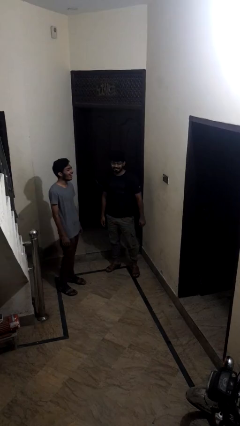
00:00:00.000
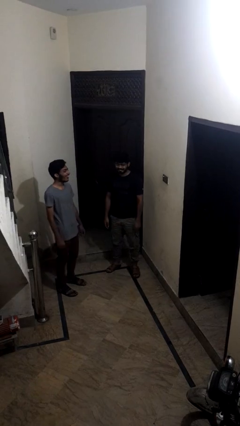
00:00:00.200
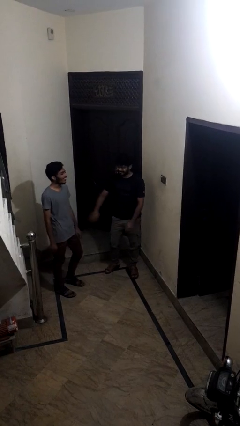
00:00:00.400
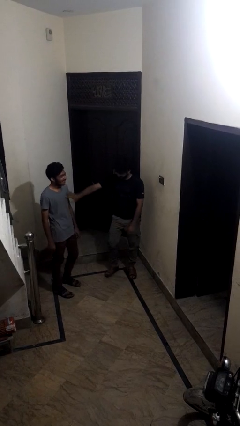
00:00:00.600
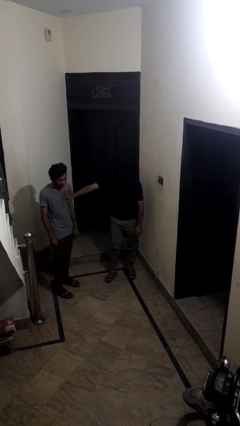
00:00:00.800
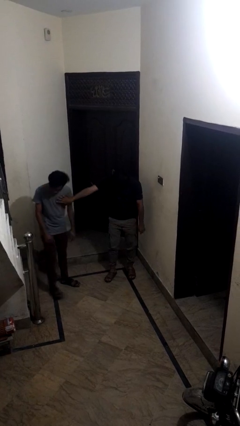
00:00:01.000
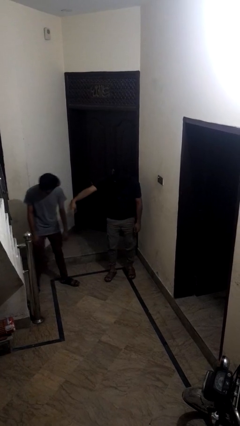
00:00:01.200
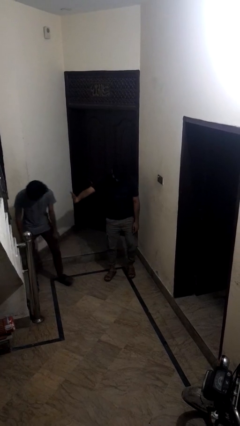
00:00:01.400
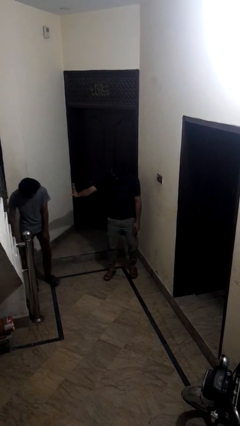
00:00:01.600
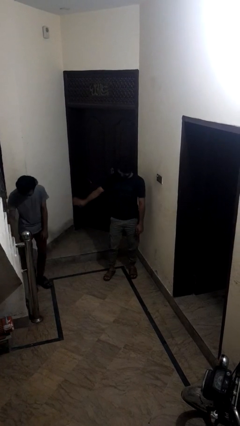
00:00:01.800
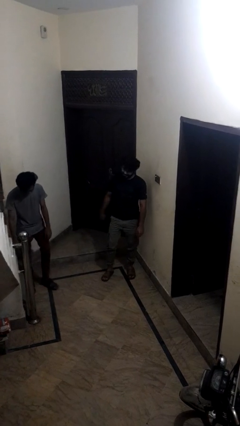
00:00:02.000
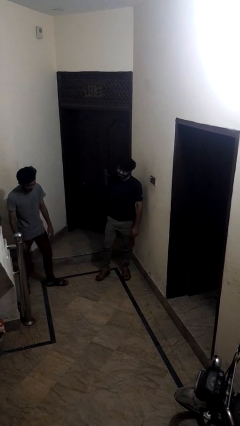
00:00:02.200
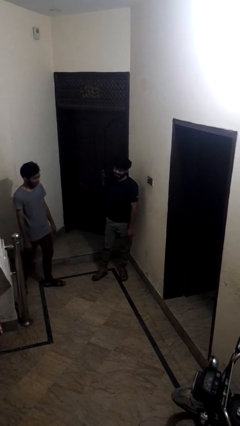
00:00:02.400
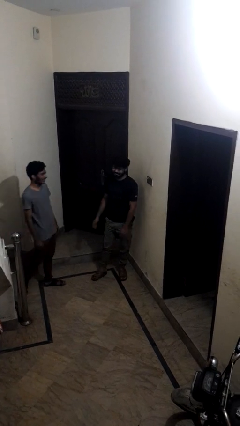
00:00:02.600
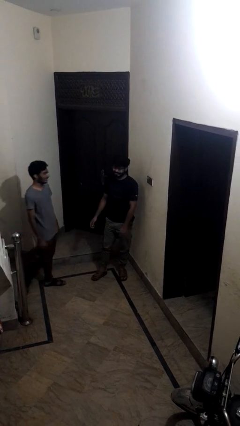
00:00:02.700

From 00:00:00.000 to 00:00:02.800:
person shoves person

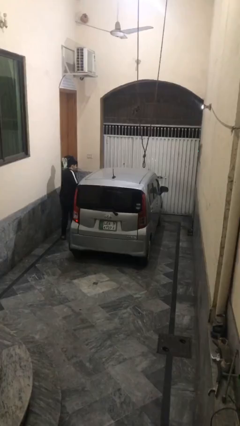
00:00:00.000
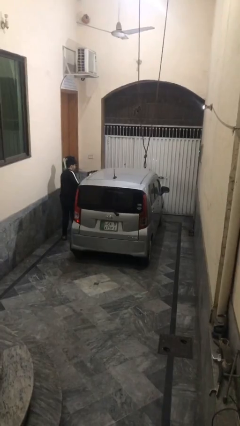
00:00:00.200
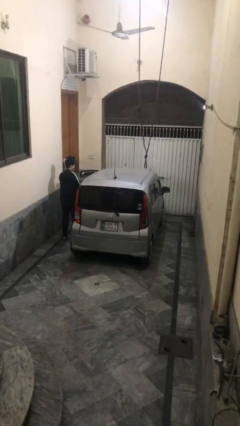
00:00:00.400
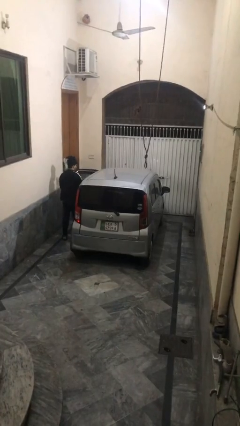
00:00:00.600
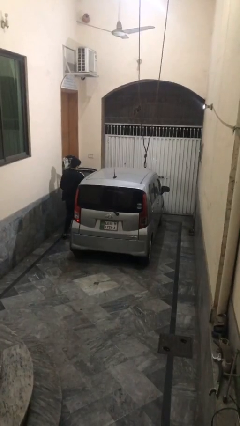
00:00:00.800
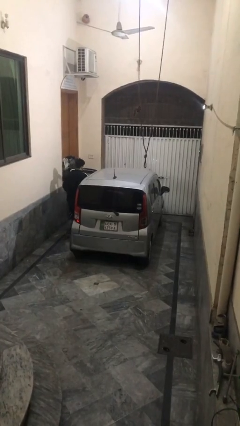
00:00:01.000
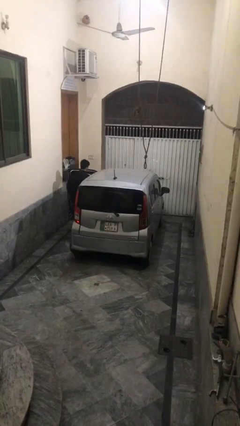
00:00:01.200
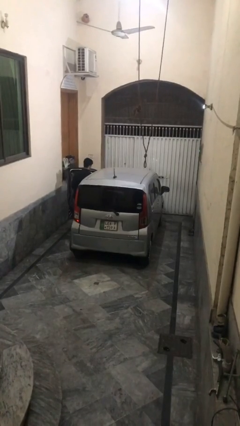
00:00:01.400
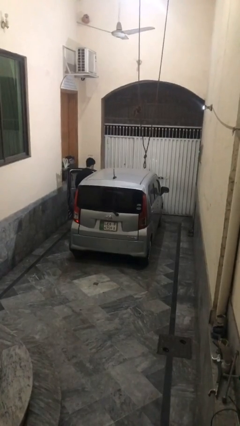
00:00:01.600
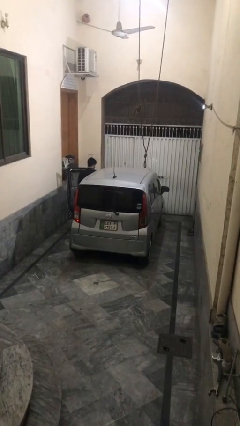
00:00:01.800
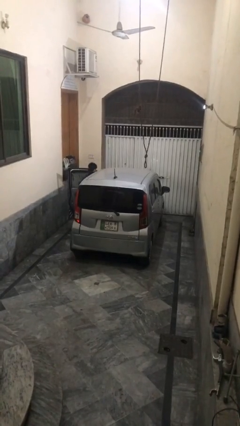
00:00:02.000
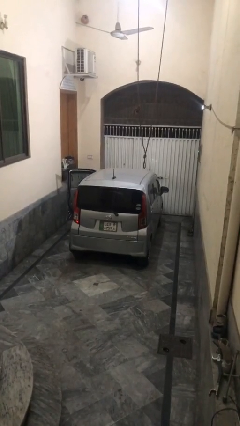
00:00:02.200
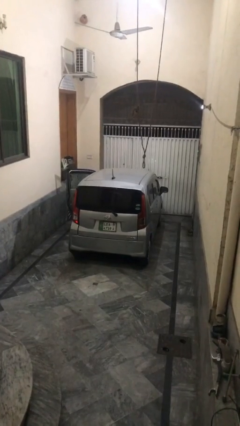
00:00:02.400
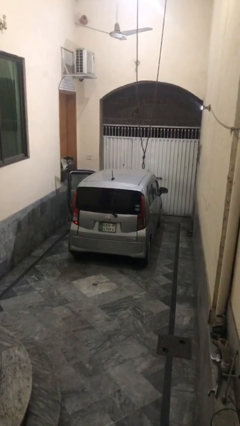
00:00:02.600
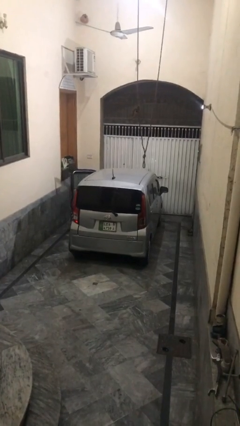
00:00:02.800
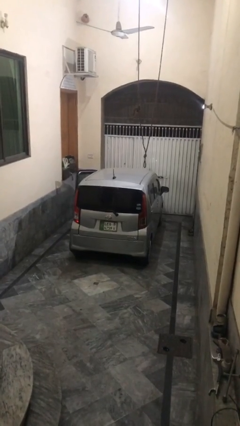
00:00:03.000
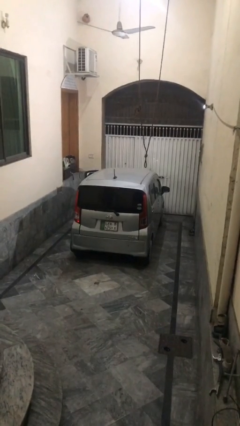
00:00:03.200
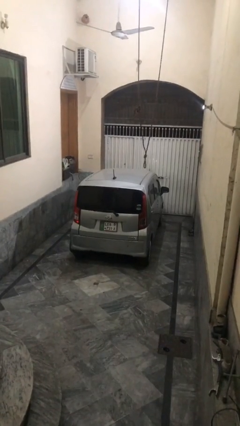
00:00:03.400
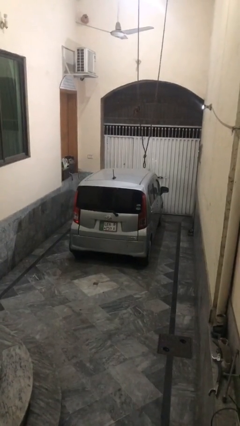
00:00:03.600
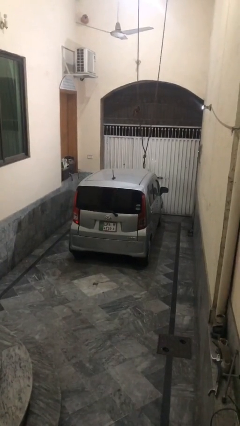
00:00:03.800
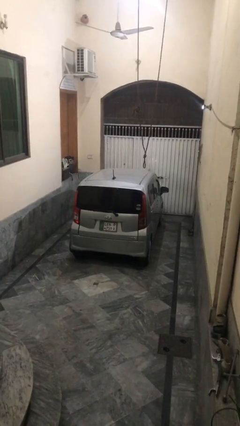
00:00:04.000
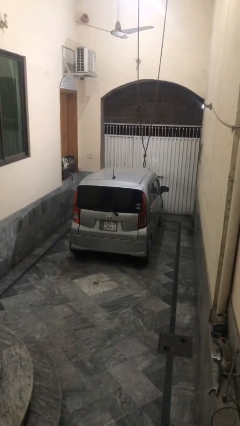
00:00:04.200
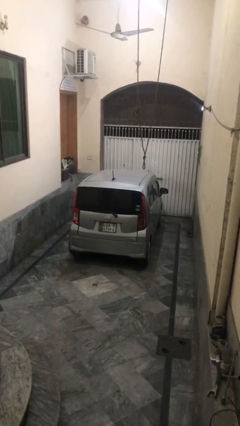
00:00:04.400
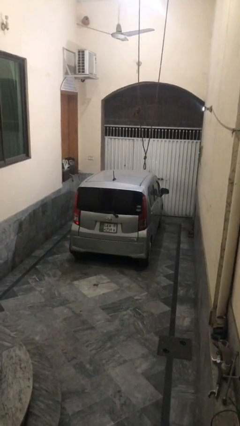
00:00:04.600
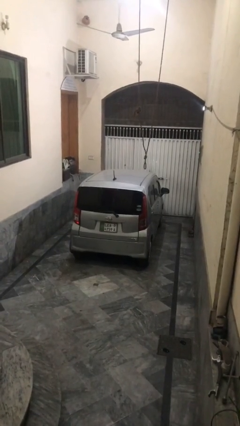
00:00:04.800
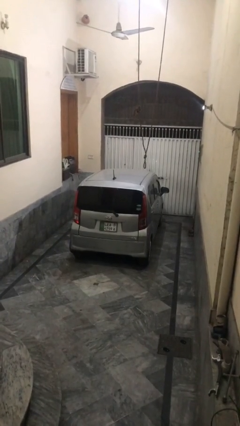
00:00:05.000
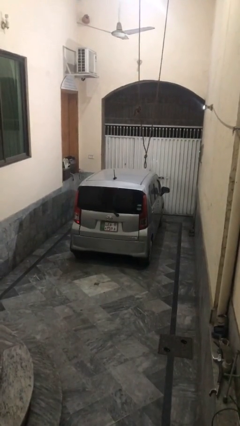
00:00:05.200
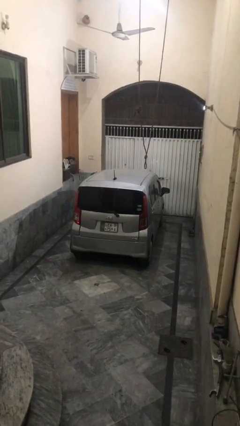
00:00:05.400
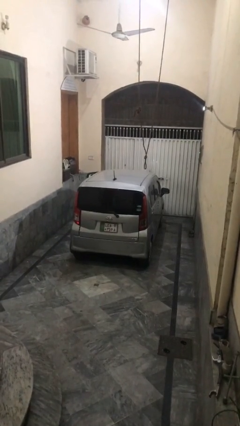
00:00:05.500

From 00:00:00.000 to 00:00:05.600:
car picks up person

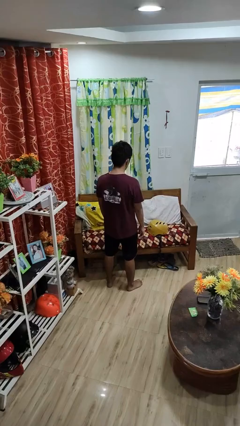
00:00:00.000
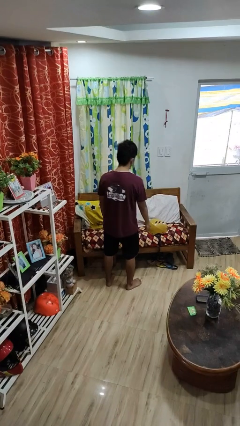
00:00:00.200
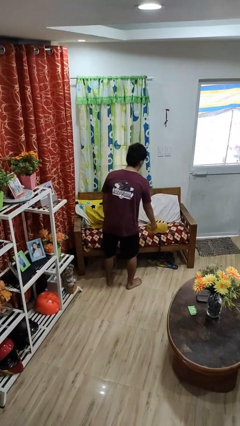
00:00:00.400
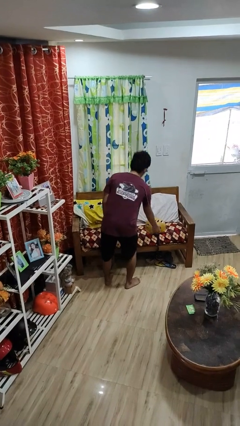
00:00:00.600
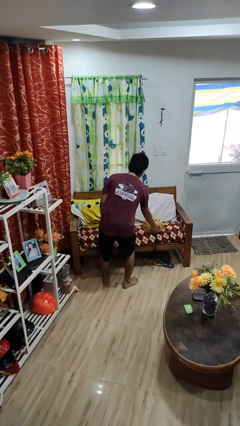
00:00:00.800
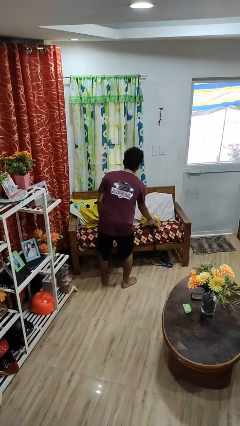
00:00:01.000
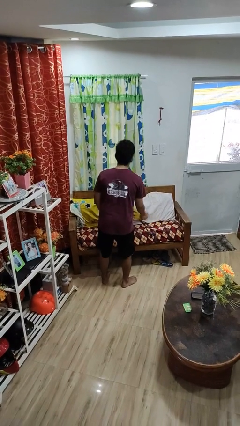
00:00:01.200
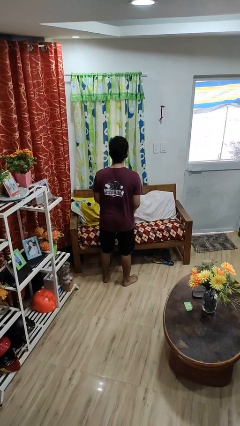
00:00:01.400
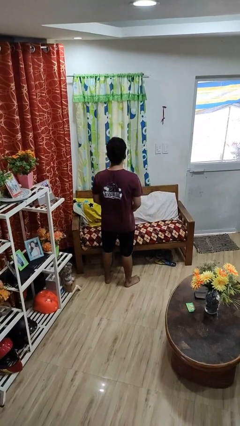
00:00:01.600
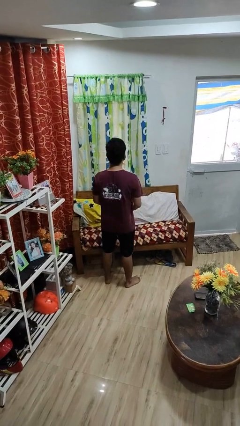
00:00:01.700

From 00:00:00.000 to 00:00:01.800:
person picks up object from couch

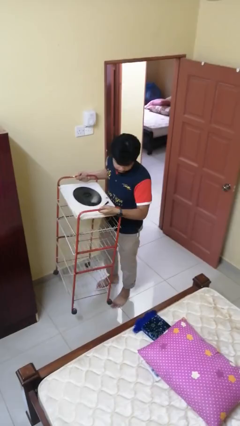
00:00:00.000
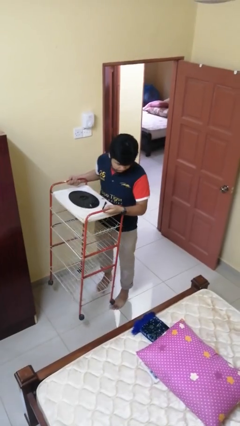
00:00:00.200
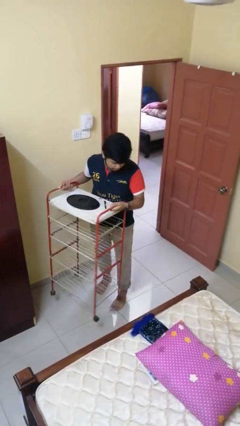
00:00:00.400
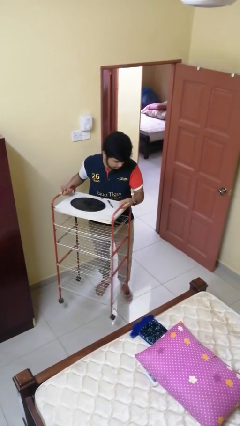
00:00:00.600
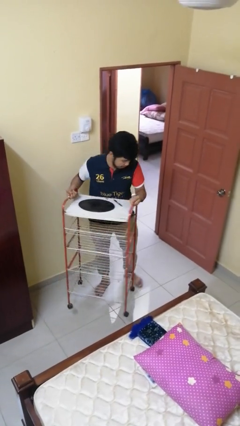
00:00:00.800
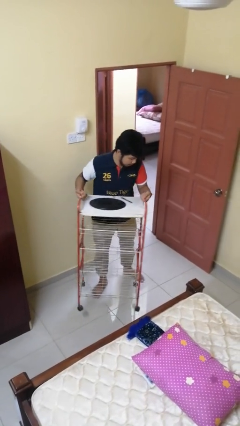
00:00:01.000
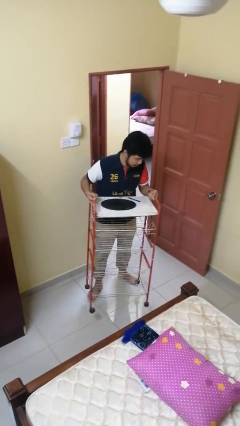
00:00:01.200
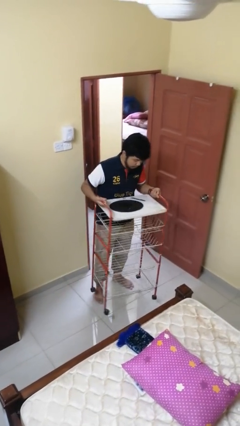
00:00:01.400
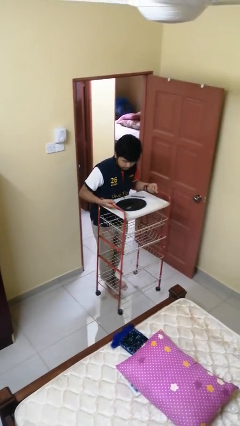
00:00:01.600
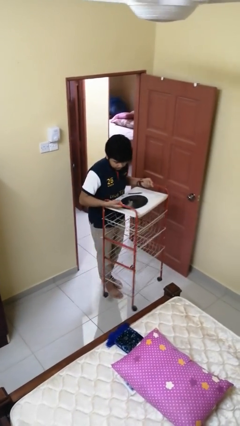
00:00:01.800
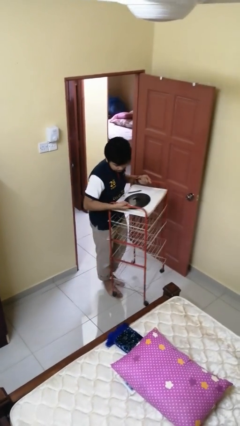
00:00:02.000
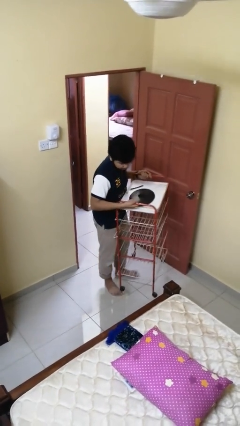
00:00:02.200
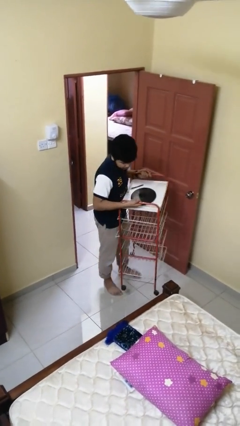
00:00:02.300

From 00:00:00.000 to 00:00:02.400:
person carries furniture

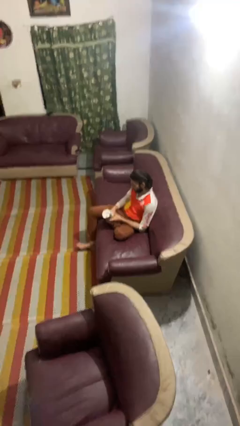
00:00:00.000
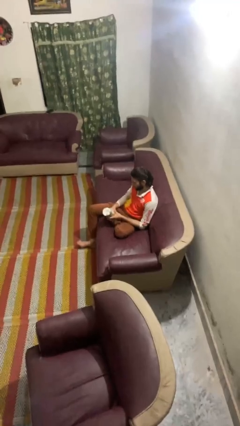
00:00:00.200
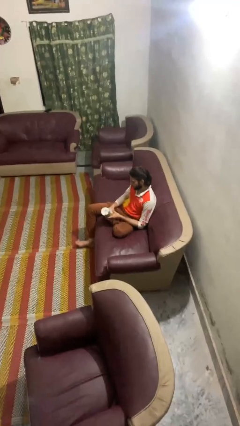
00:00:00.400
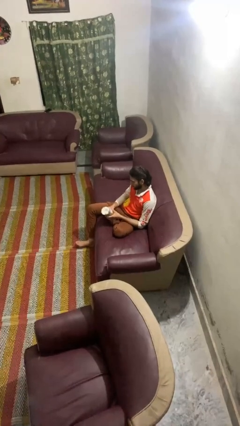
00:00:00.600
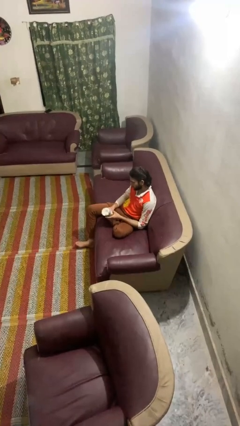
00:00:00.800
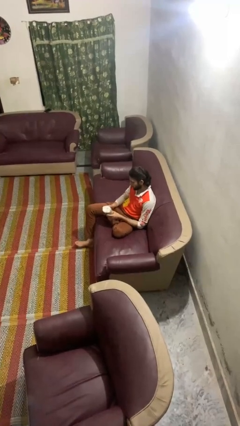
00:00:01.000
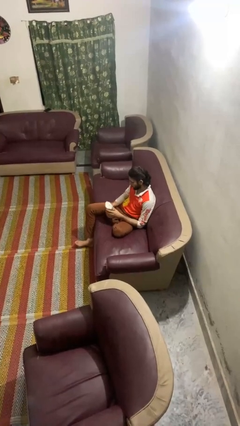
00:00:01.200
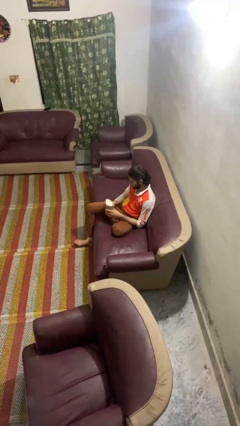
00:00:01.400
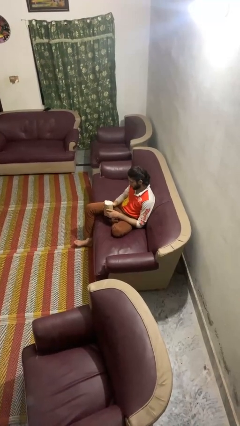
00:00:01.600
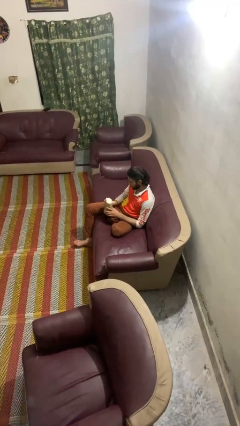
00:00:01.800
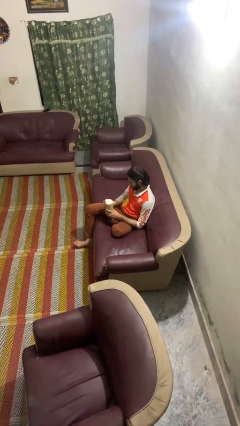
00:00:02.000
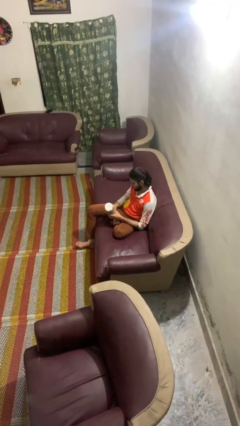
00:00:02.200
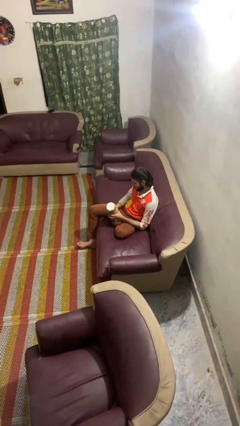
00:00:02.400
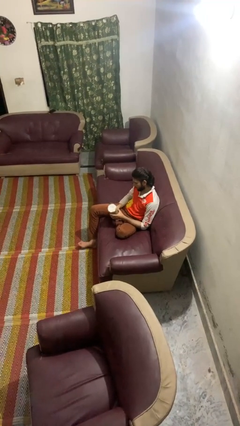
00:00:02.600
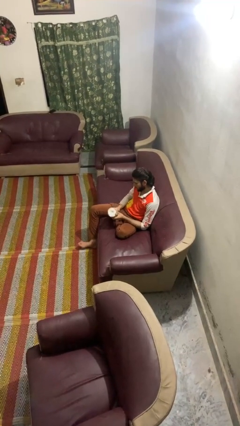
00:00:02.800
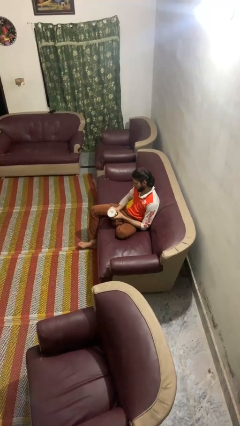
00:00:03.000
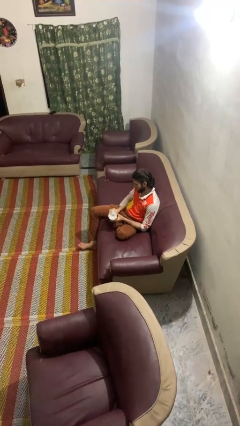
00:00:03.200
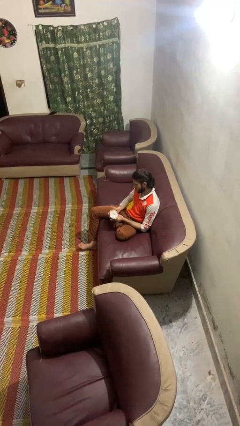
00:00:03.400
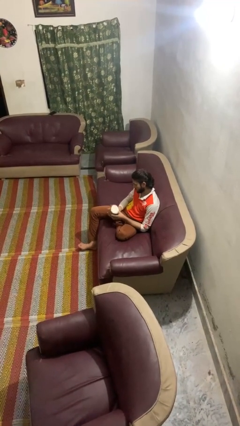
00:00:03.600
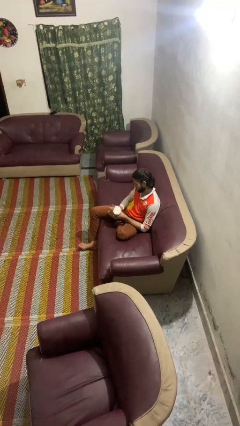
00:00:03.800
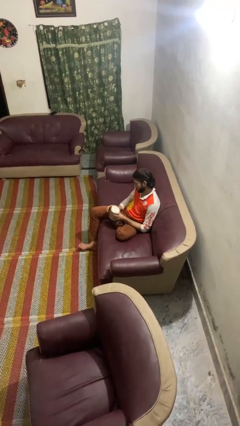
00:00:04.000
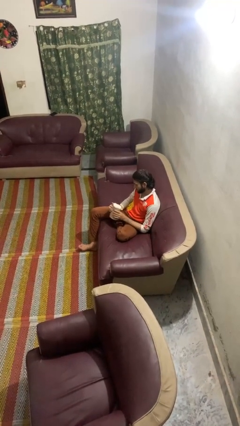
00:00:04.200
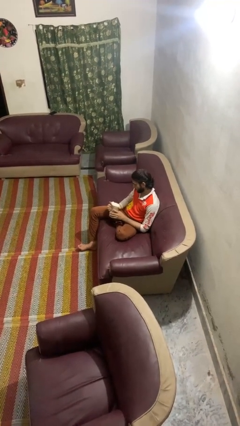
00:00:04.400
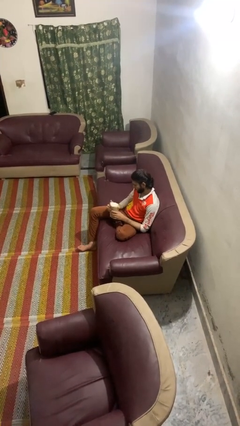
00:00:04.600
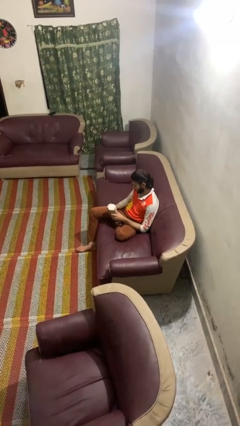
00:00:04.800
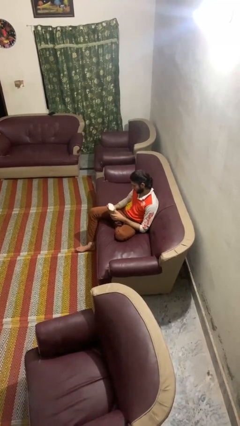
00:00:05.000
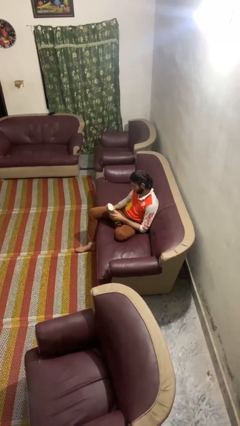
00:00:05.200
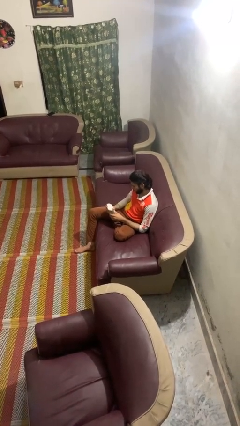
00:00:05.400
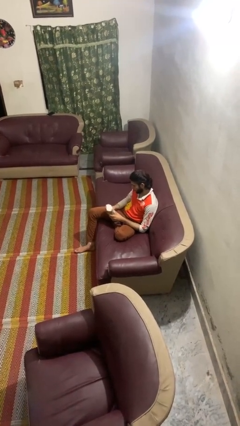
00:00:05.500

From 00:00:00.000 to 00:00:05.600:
person squeezes object
